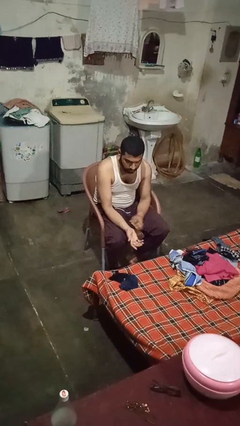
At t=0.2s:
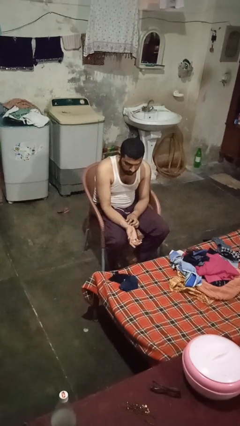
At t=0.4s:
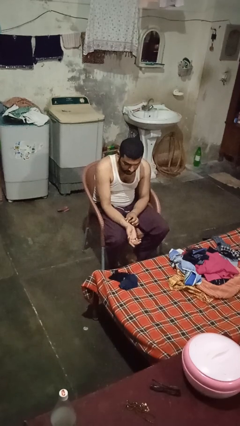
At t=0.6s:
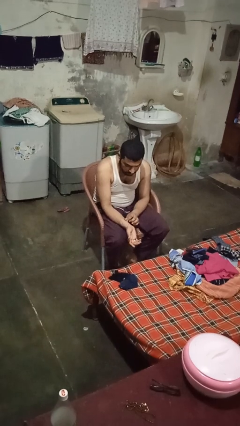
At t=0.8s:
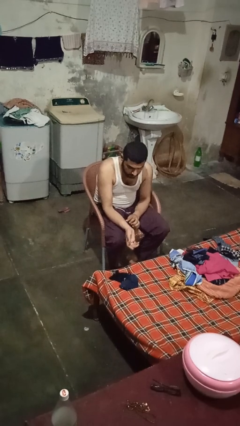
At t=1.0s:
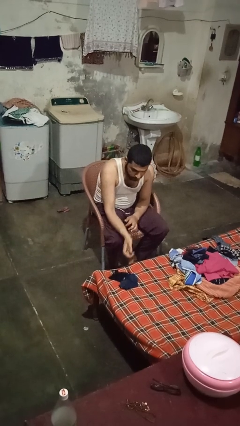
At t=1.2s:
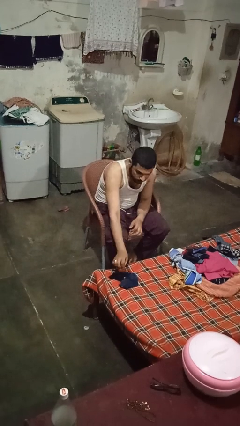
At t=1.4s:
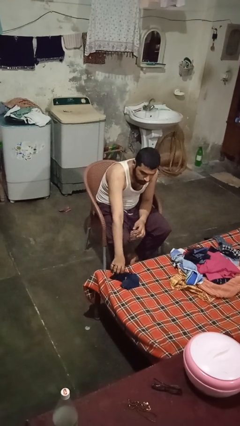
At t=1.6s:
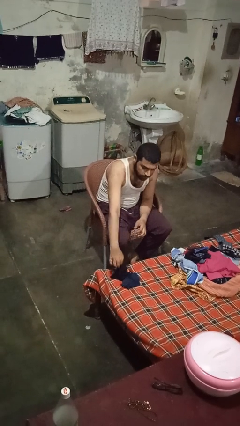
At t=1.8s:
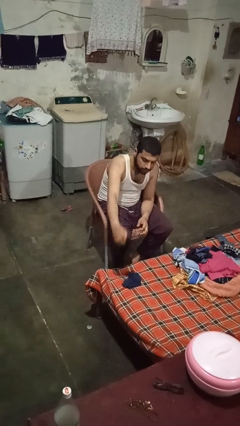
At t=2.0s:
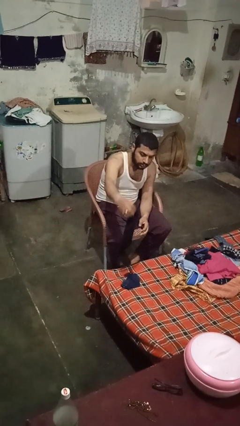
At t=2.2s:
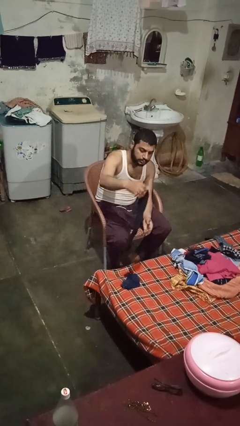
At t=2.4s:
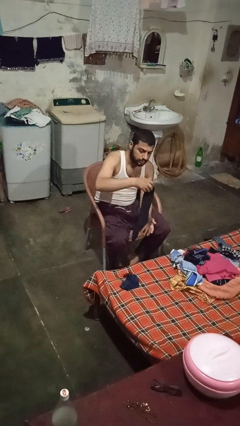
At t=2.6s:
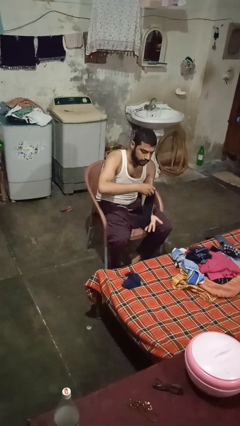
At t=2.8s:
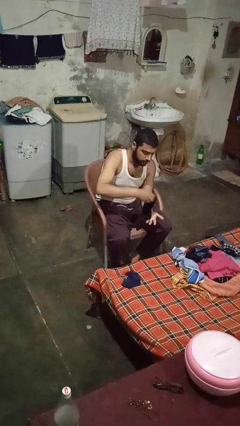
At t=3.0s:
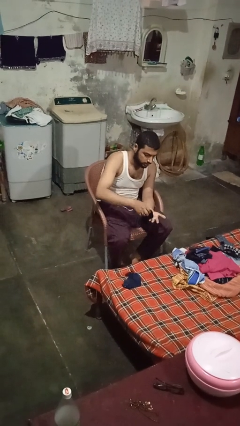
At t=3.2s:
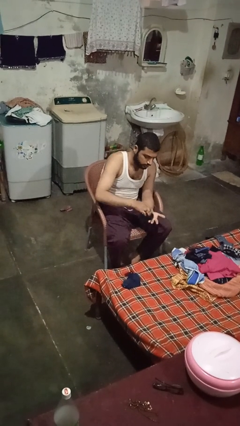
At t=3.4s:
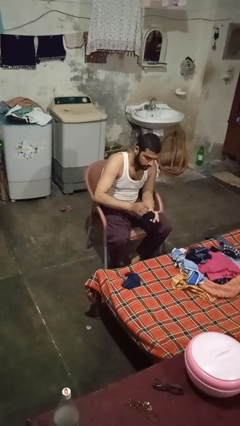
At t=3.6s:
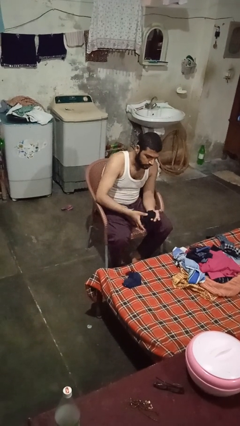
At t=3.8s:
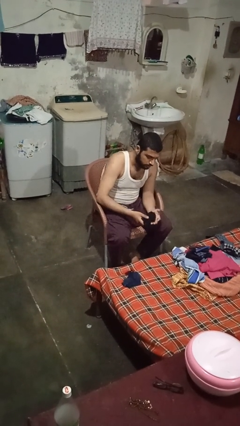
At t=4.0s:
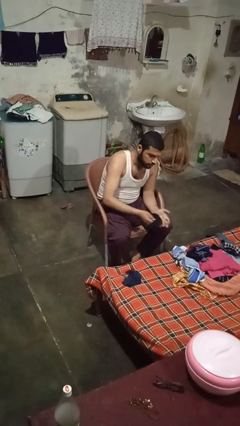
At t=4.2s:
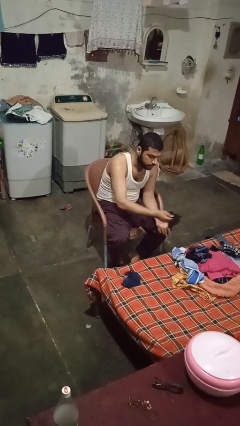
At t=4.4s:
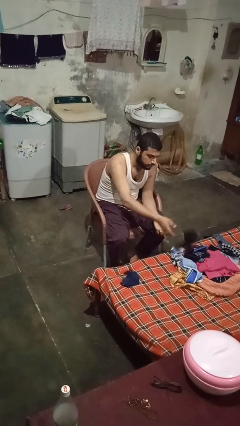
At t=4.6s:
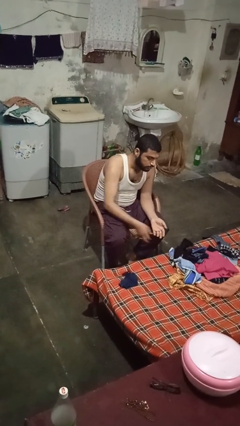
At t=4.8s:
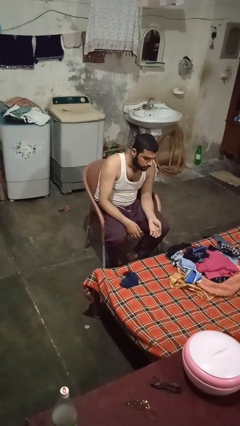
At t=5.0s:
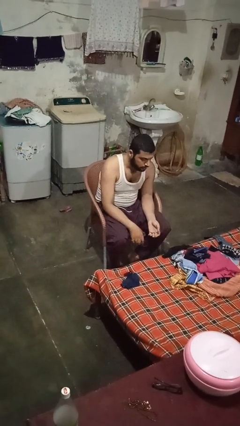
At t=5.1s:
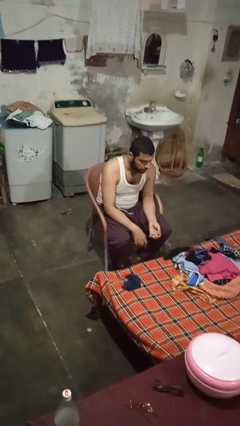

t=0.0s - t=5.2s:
person folds socks

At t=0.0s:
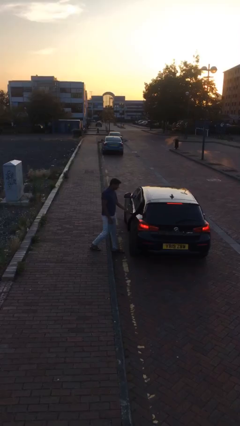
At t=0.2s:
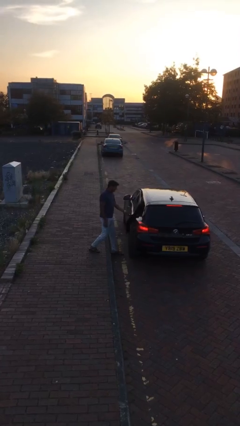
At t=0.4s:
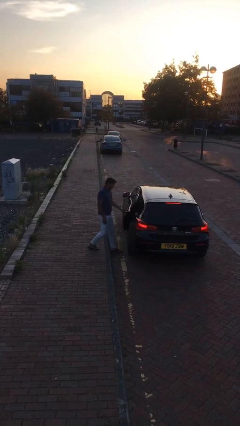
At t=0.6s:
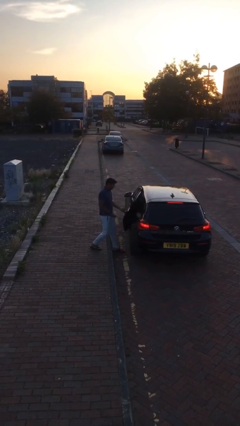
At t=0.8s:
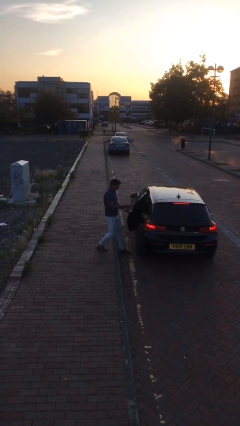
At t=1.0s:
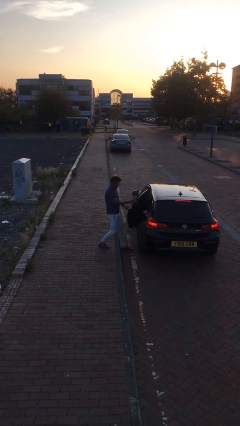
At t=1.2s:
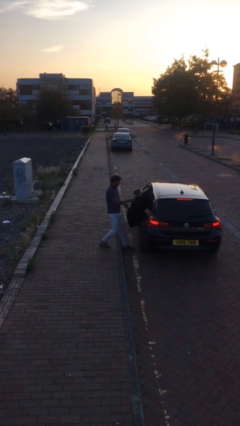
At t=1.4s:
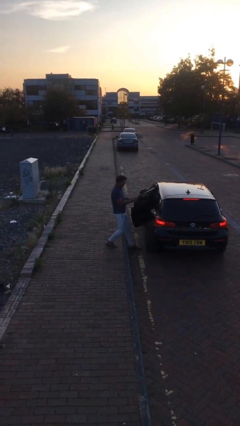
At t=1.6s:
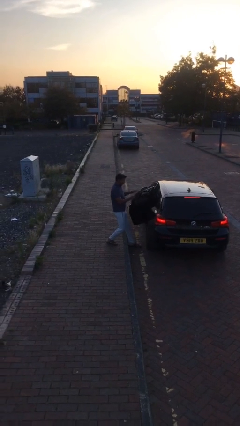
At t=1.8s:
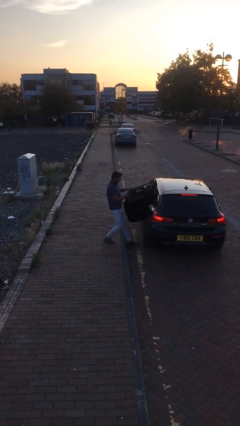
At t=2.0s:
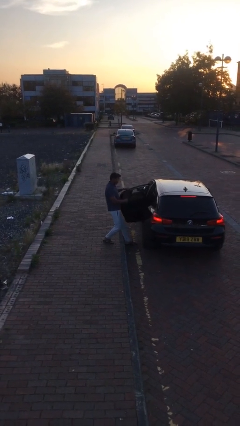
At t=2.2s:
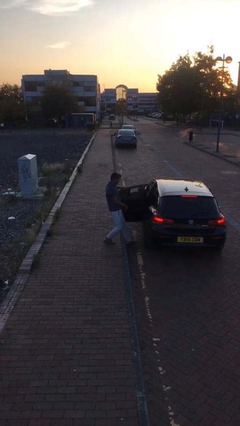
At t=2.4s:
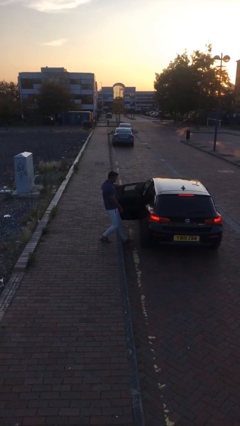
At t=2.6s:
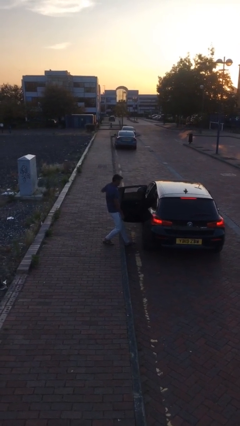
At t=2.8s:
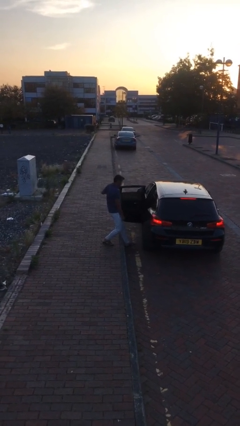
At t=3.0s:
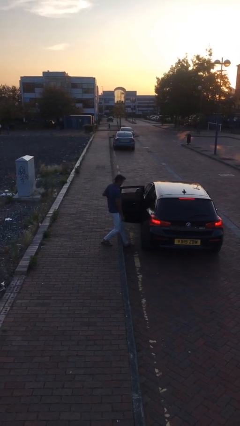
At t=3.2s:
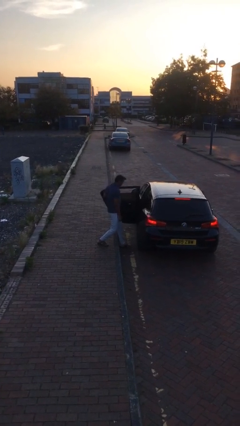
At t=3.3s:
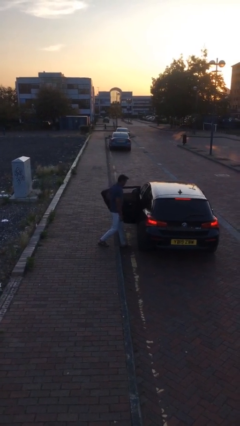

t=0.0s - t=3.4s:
person opens car door

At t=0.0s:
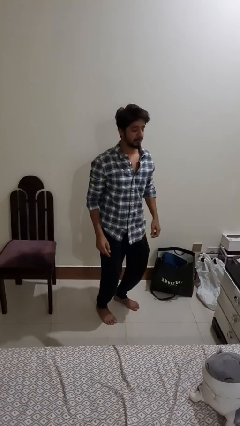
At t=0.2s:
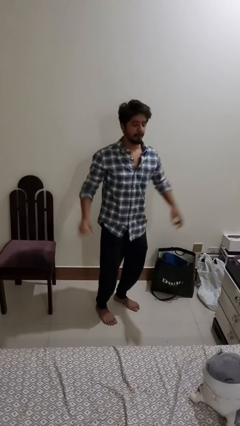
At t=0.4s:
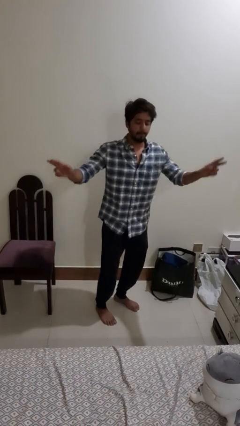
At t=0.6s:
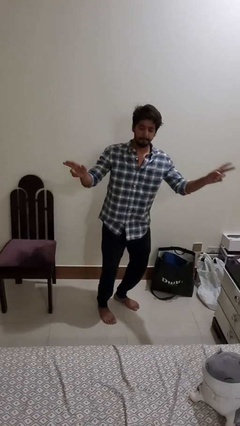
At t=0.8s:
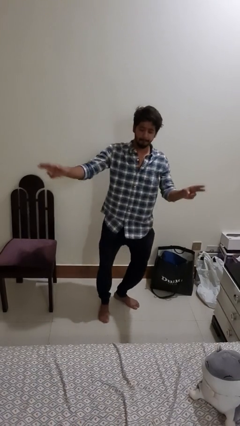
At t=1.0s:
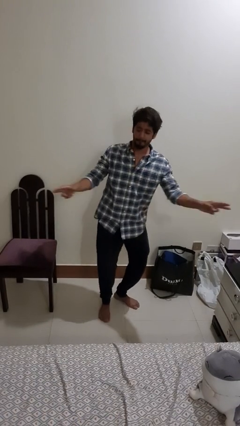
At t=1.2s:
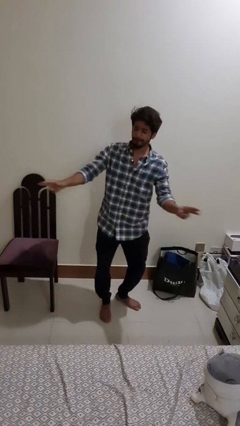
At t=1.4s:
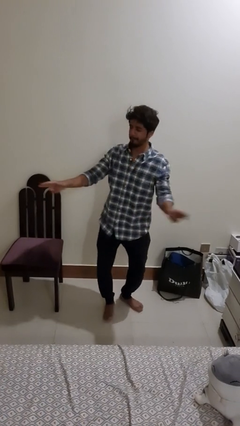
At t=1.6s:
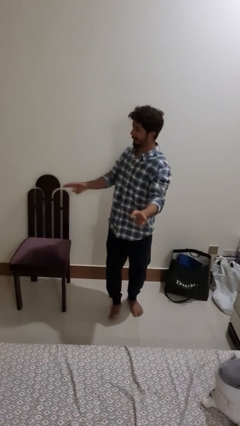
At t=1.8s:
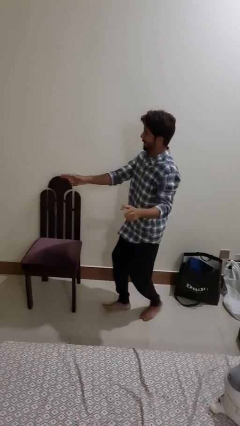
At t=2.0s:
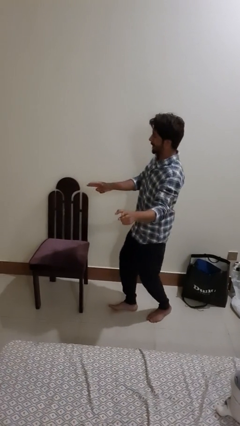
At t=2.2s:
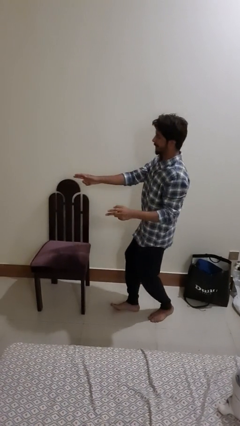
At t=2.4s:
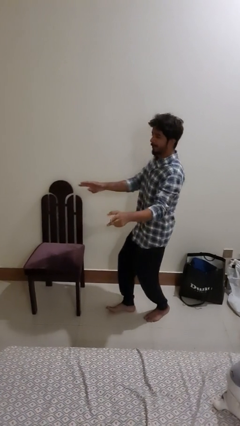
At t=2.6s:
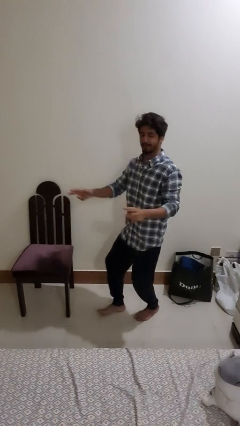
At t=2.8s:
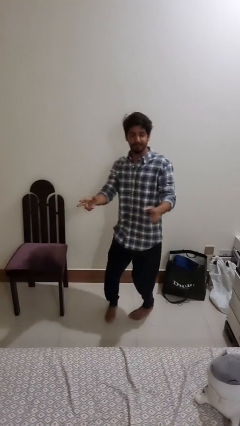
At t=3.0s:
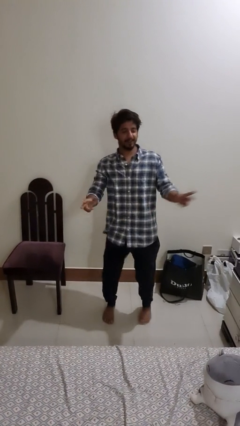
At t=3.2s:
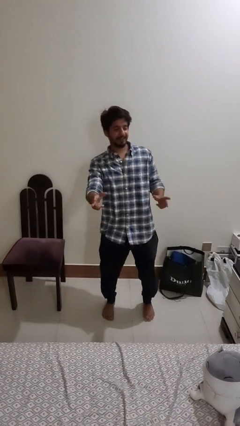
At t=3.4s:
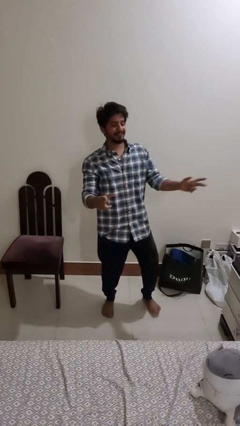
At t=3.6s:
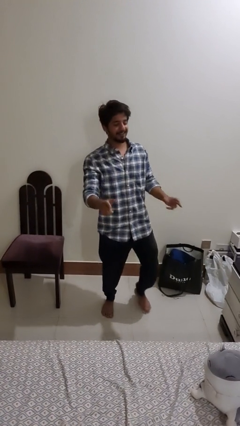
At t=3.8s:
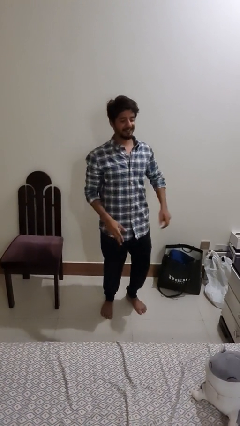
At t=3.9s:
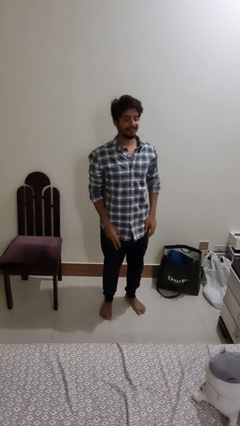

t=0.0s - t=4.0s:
person dances in place

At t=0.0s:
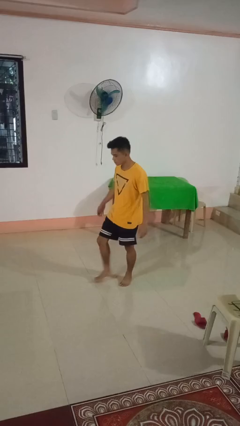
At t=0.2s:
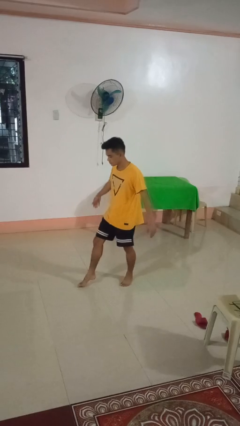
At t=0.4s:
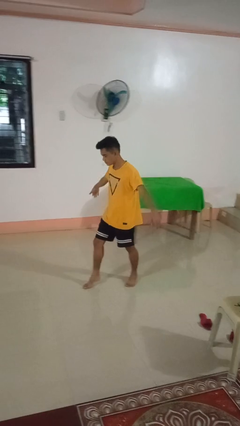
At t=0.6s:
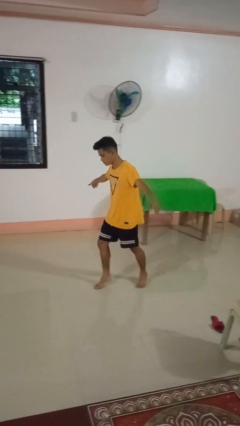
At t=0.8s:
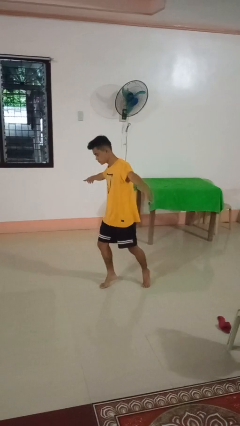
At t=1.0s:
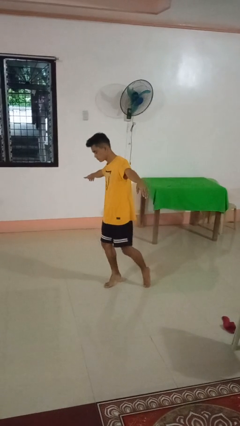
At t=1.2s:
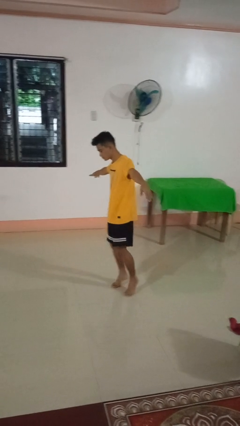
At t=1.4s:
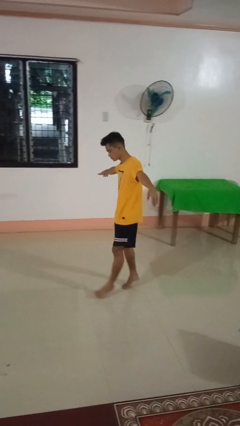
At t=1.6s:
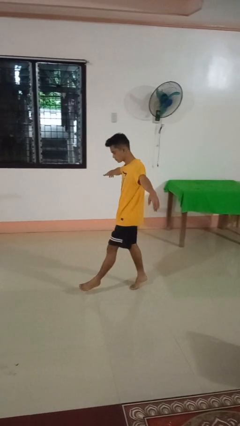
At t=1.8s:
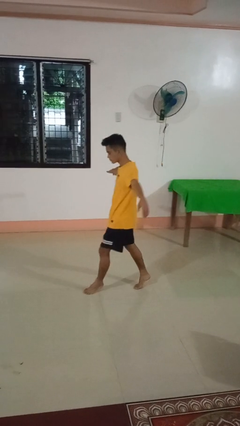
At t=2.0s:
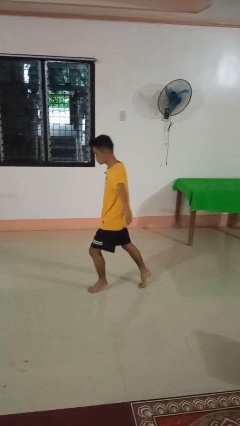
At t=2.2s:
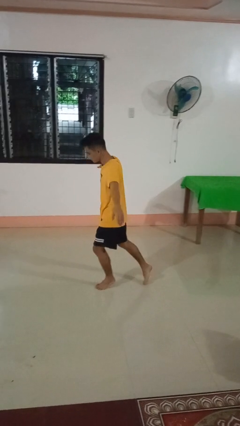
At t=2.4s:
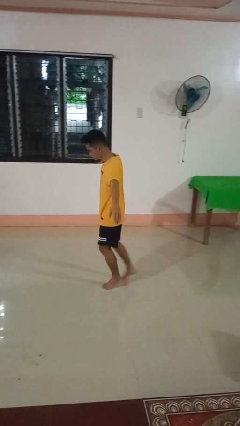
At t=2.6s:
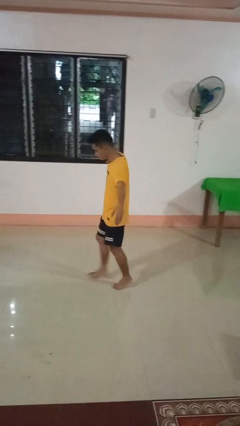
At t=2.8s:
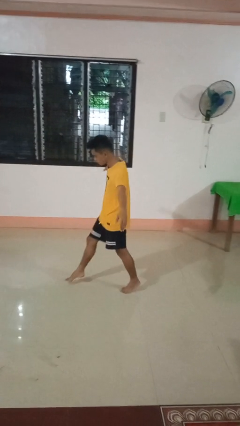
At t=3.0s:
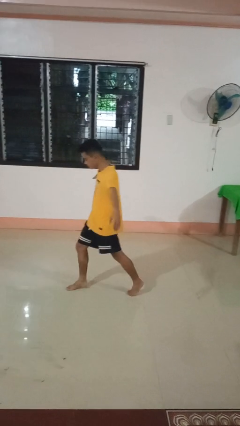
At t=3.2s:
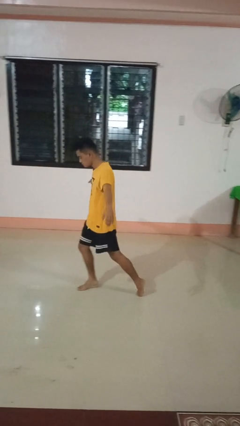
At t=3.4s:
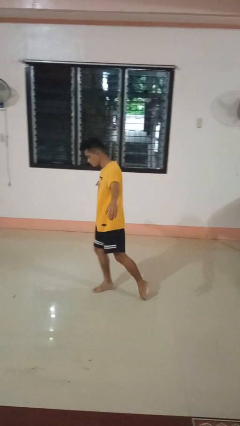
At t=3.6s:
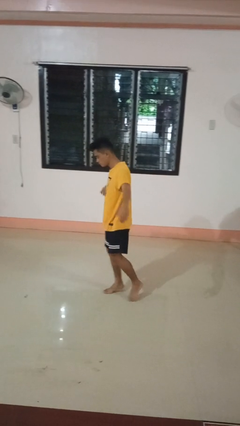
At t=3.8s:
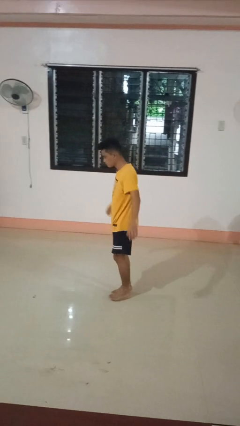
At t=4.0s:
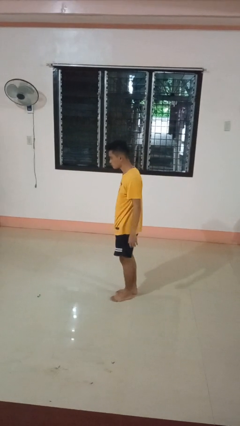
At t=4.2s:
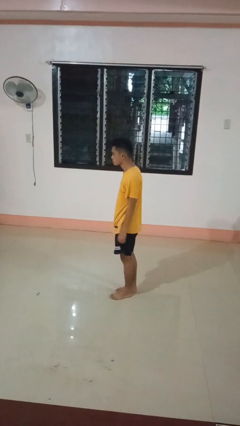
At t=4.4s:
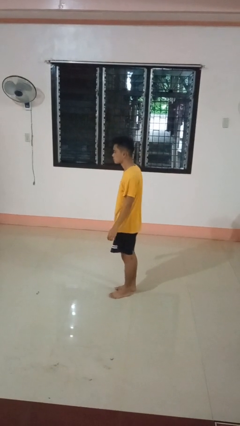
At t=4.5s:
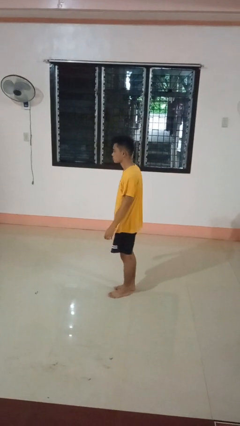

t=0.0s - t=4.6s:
person walks tiptoe
